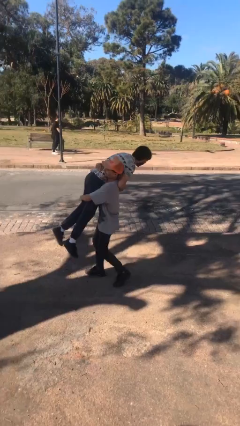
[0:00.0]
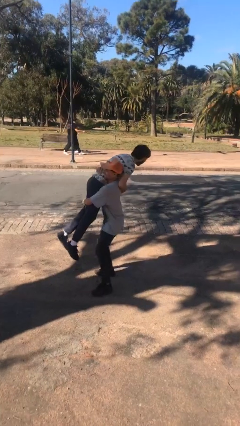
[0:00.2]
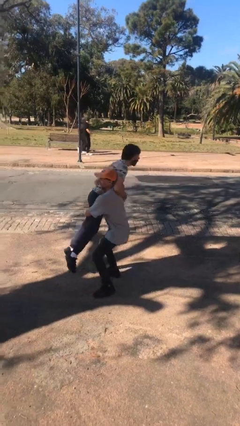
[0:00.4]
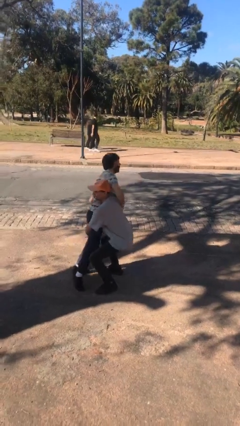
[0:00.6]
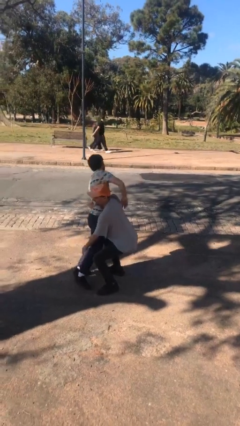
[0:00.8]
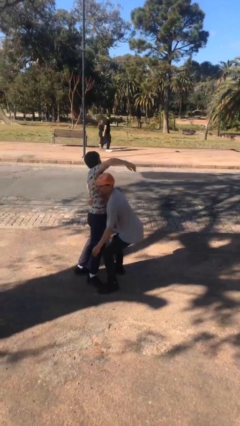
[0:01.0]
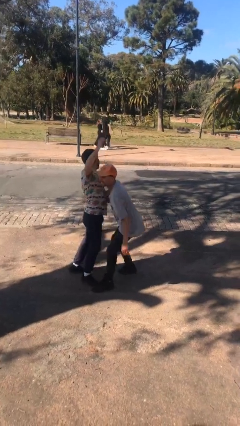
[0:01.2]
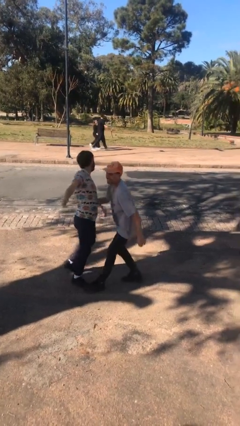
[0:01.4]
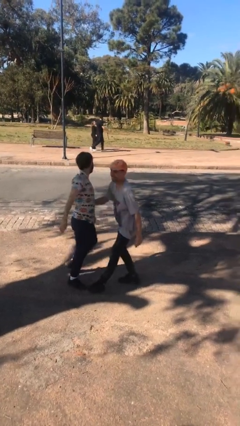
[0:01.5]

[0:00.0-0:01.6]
person puts down person

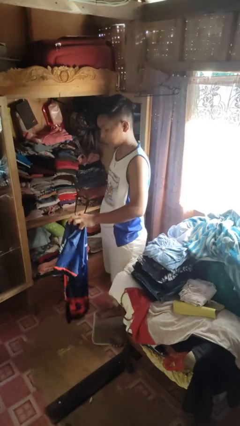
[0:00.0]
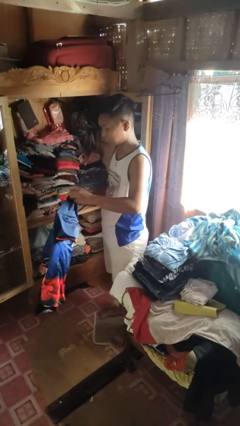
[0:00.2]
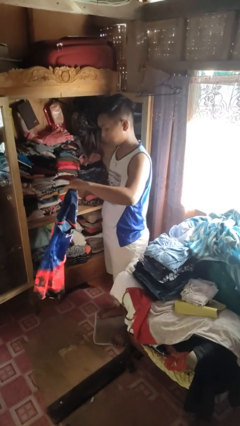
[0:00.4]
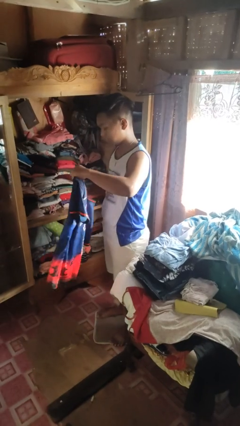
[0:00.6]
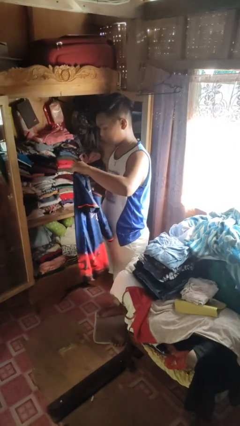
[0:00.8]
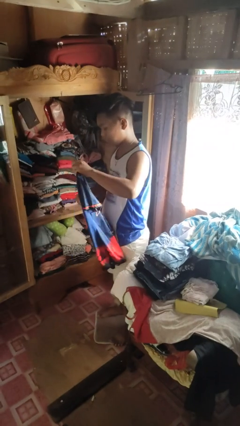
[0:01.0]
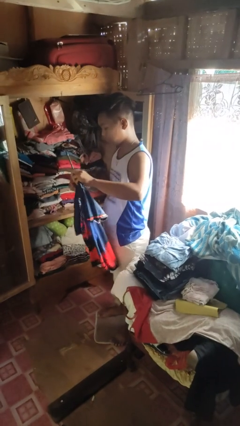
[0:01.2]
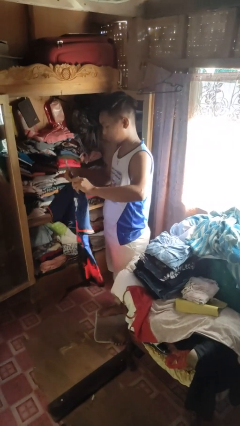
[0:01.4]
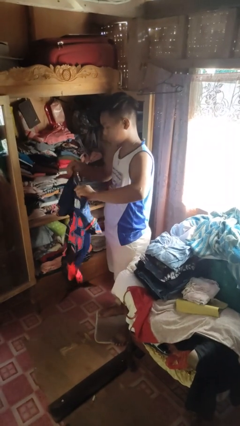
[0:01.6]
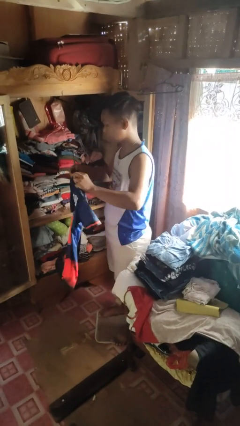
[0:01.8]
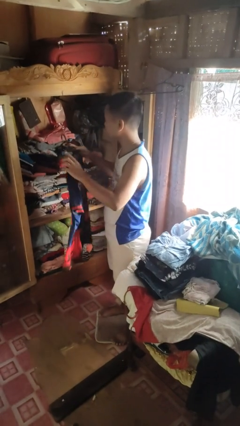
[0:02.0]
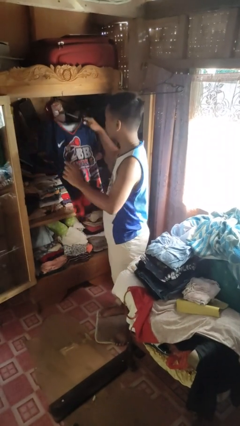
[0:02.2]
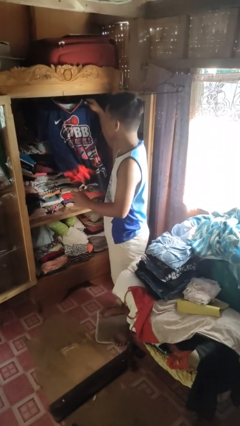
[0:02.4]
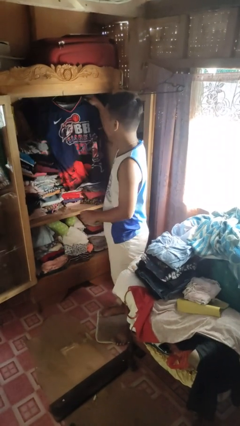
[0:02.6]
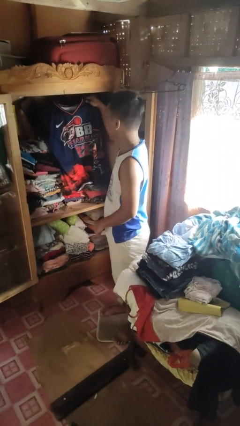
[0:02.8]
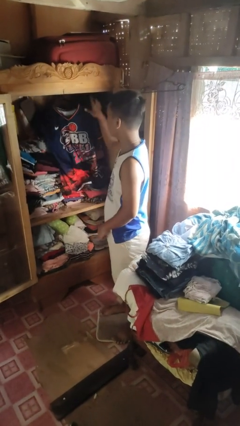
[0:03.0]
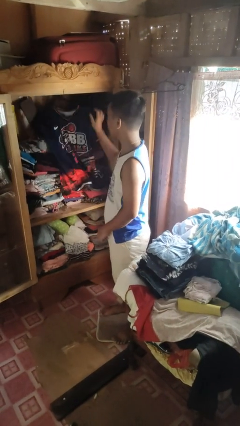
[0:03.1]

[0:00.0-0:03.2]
person puts clothes into closet

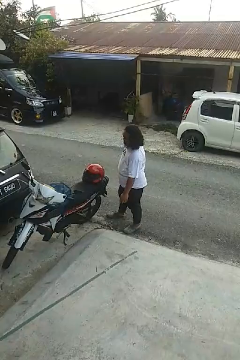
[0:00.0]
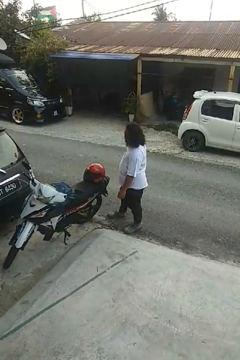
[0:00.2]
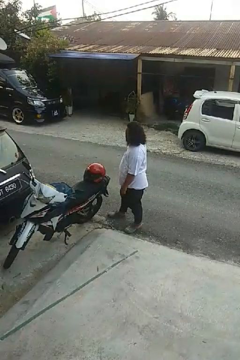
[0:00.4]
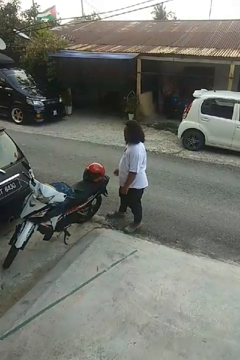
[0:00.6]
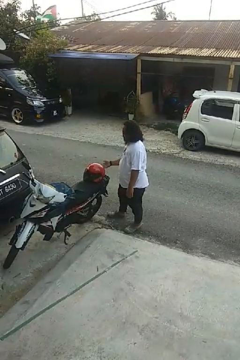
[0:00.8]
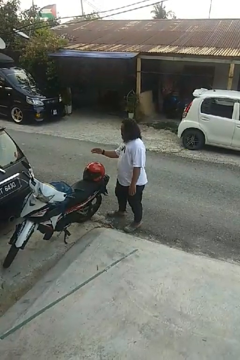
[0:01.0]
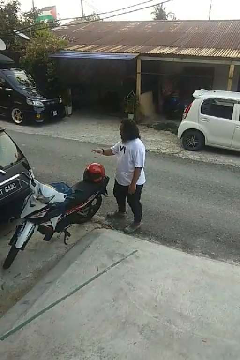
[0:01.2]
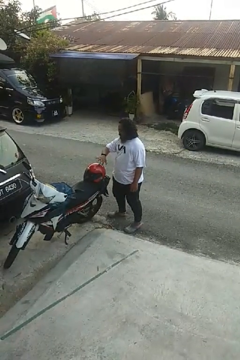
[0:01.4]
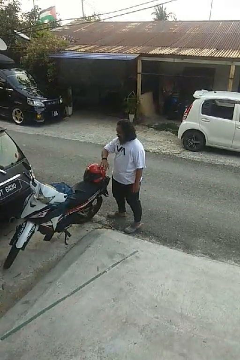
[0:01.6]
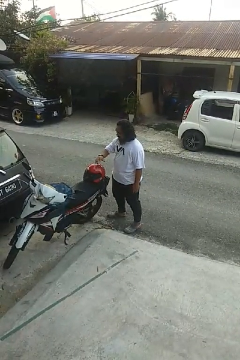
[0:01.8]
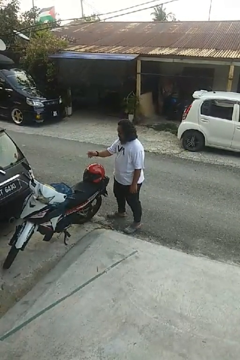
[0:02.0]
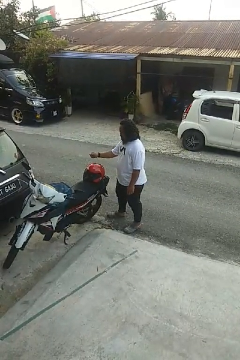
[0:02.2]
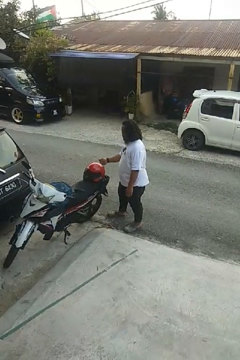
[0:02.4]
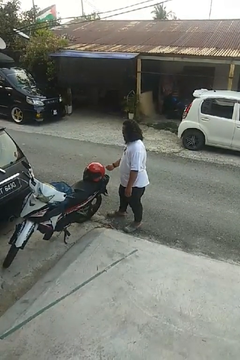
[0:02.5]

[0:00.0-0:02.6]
person waves hand over object

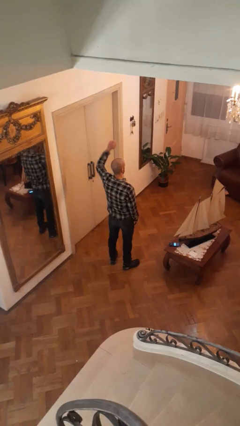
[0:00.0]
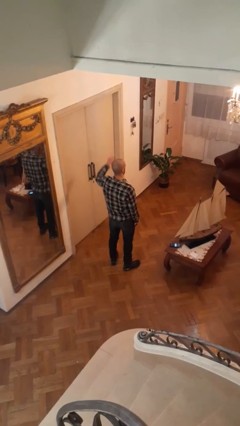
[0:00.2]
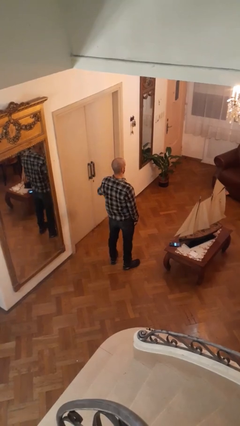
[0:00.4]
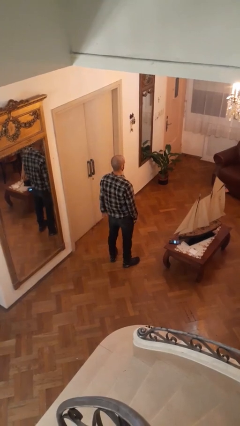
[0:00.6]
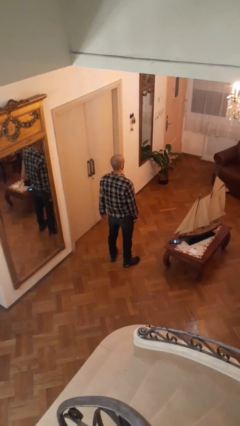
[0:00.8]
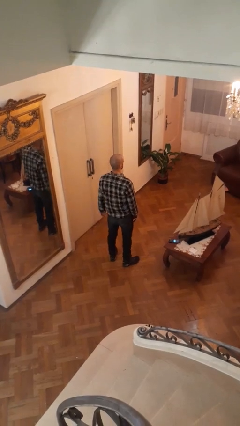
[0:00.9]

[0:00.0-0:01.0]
person gestures lower hand

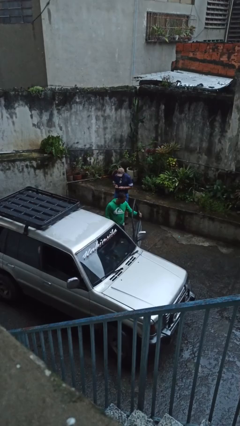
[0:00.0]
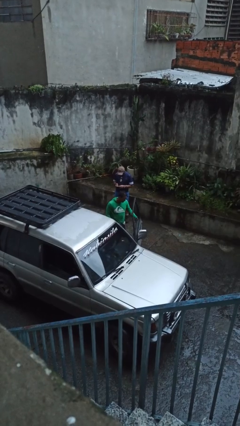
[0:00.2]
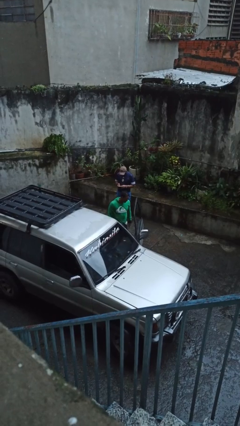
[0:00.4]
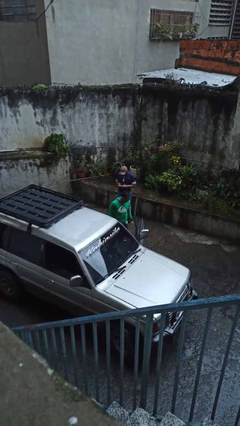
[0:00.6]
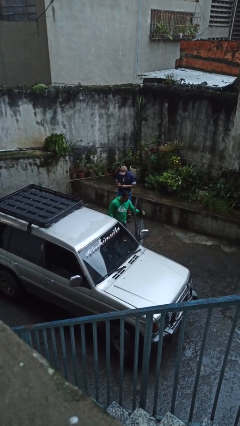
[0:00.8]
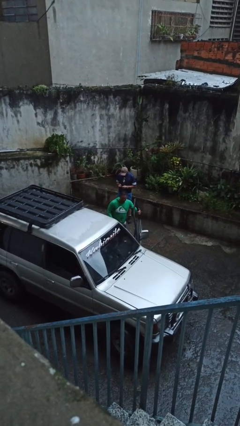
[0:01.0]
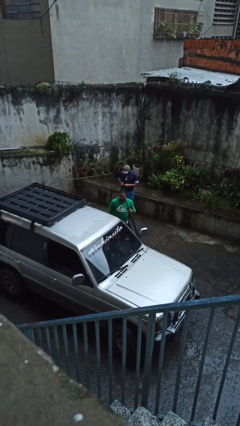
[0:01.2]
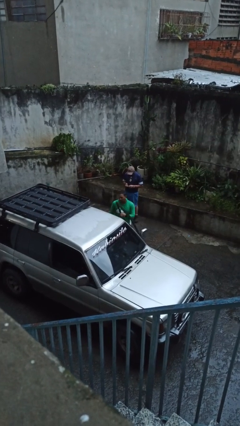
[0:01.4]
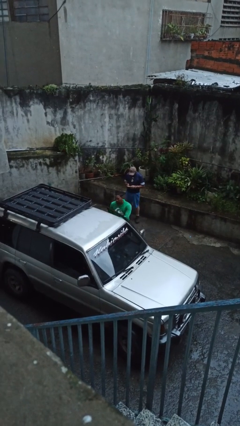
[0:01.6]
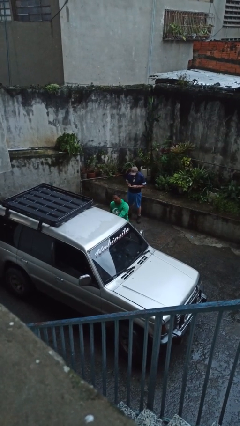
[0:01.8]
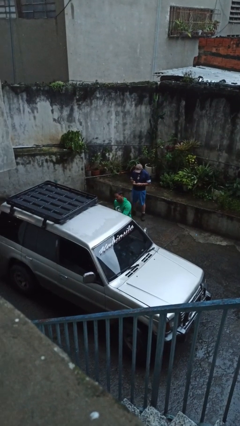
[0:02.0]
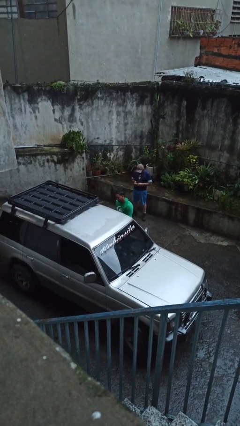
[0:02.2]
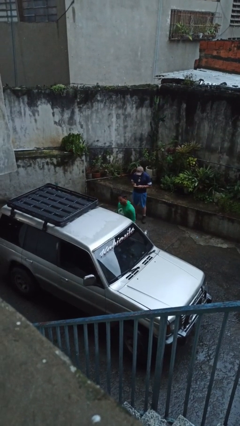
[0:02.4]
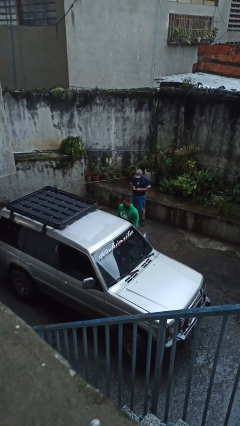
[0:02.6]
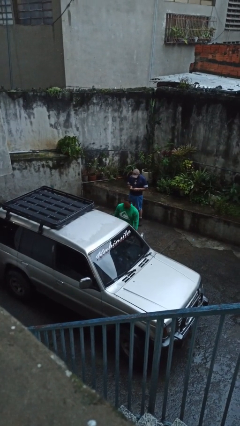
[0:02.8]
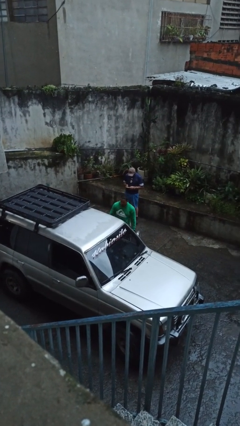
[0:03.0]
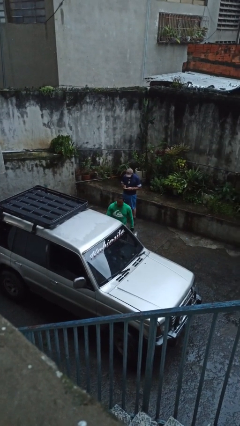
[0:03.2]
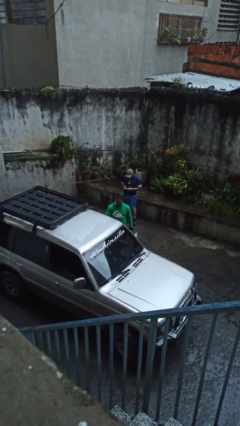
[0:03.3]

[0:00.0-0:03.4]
person closes car door

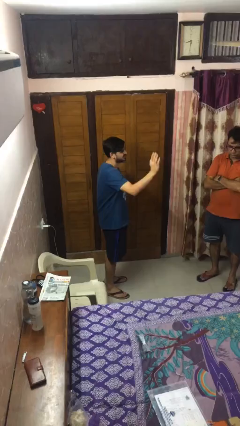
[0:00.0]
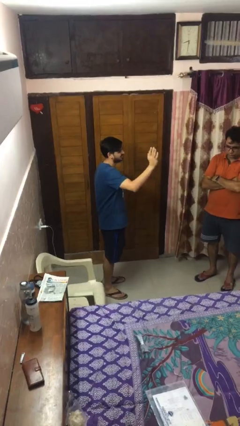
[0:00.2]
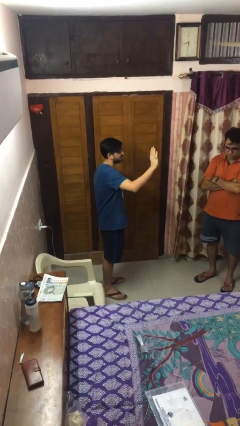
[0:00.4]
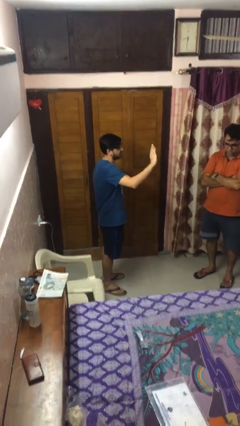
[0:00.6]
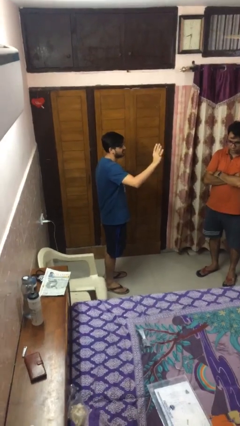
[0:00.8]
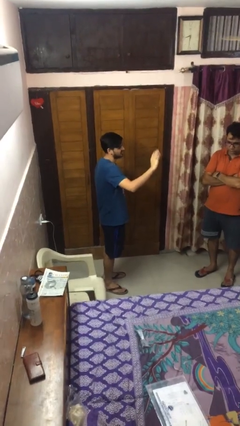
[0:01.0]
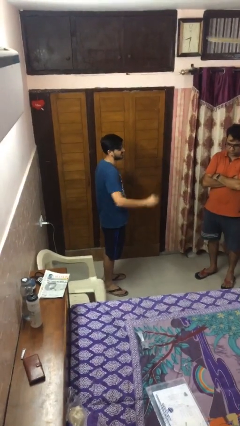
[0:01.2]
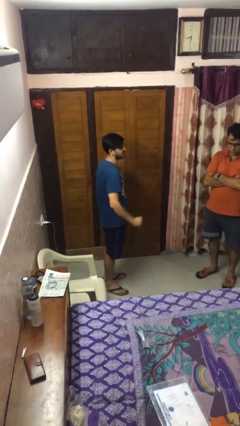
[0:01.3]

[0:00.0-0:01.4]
person waves at person

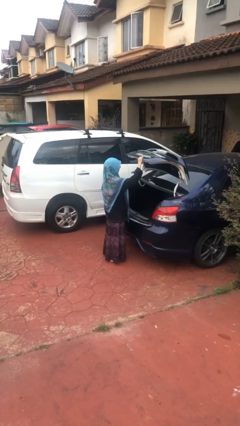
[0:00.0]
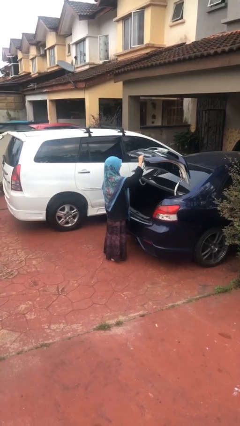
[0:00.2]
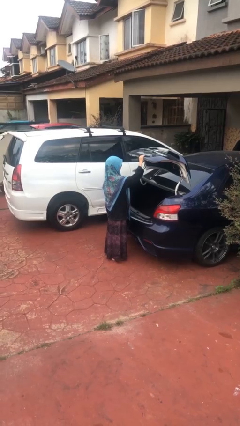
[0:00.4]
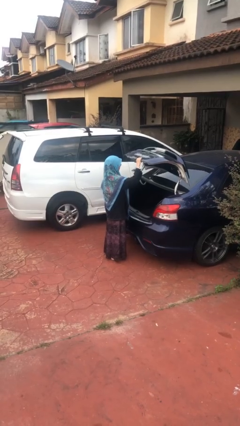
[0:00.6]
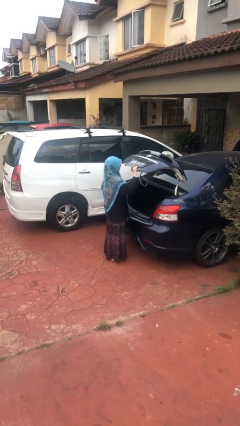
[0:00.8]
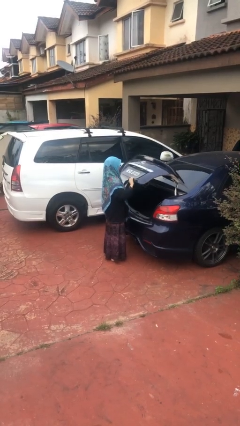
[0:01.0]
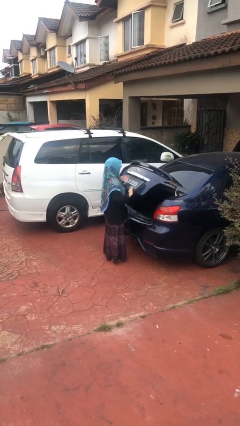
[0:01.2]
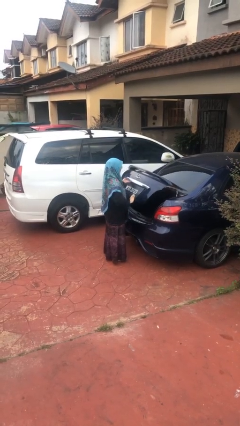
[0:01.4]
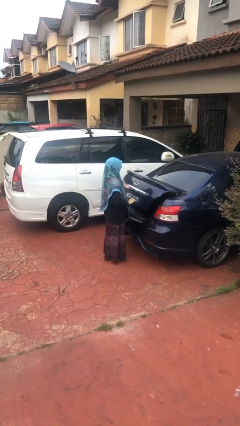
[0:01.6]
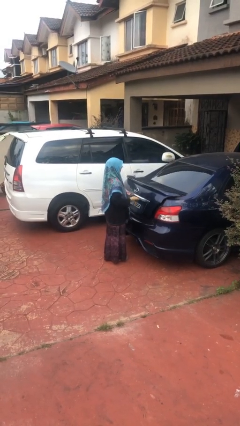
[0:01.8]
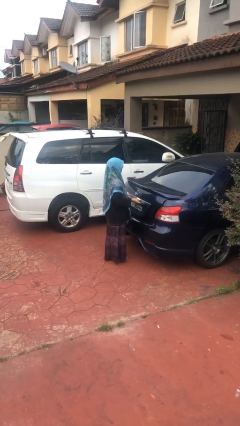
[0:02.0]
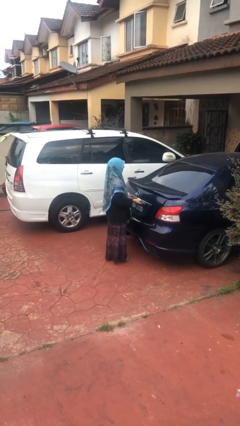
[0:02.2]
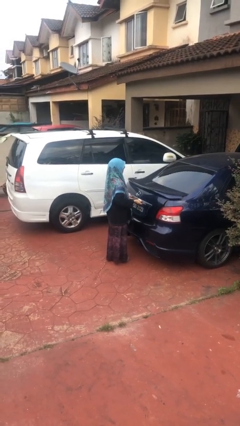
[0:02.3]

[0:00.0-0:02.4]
person closes car trunk

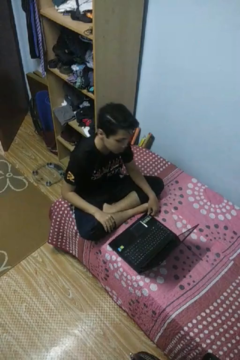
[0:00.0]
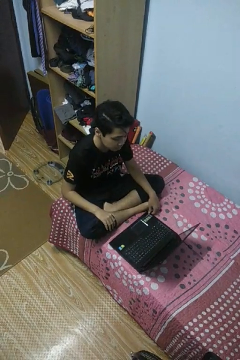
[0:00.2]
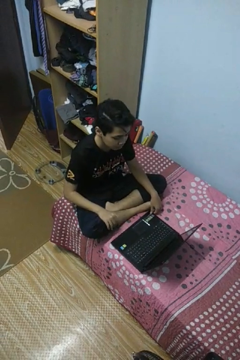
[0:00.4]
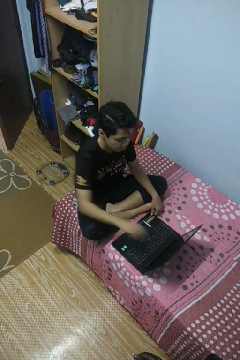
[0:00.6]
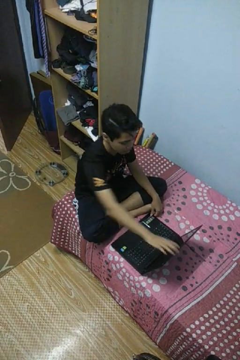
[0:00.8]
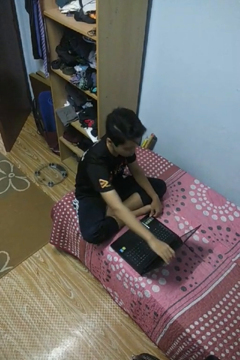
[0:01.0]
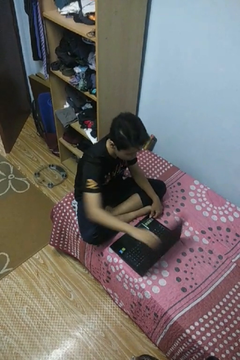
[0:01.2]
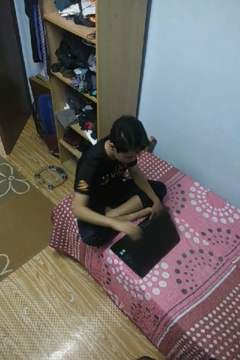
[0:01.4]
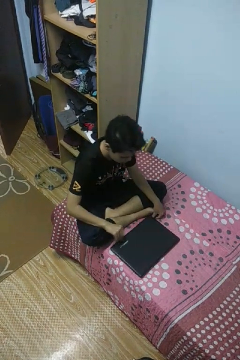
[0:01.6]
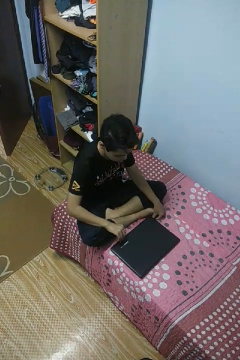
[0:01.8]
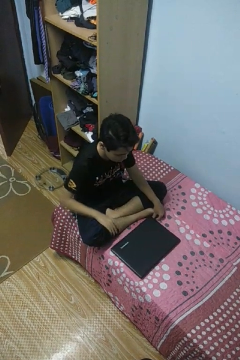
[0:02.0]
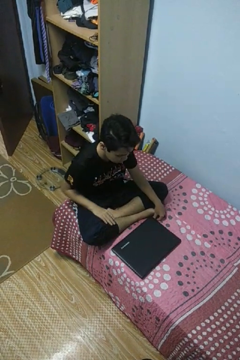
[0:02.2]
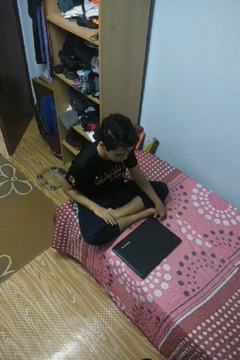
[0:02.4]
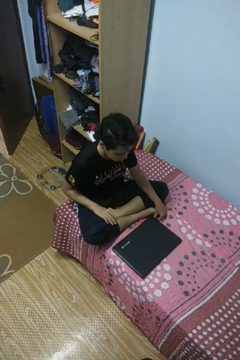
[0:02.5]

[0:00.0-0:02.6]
person closes laptop
